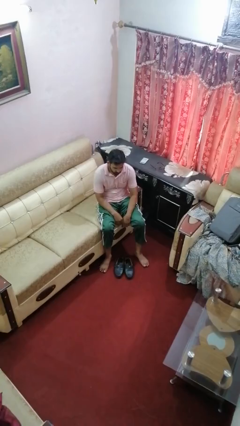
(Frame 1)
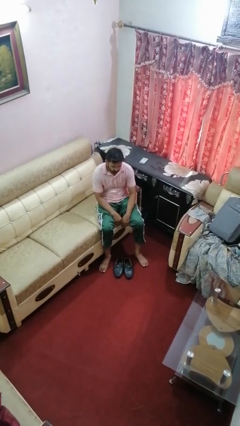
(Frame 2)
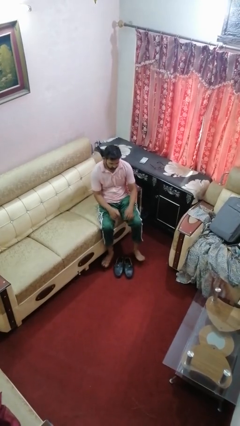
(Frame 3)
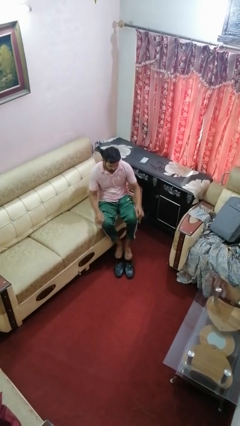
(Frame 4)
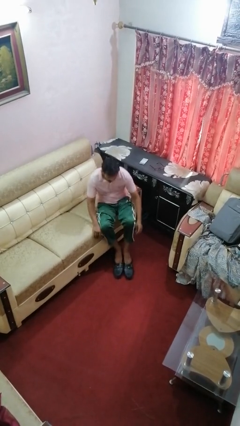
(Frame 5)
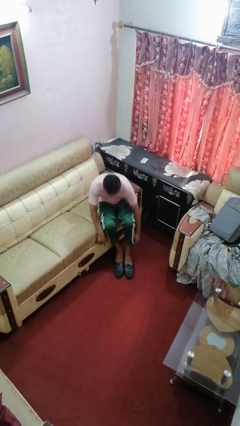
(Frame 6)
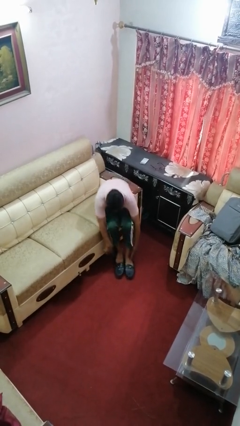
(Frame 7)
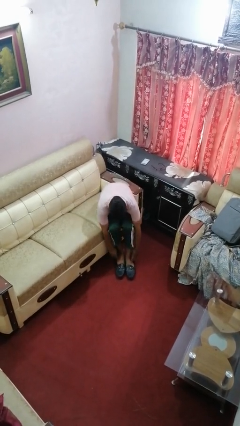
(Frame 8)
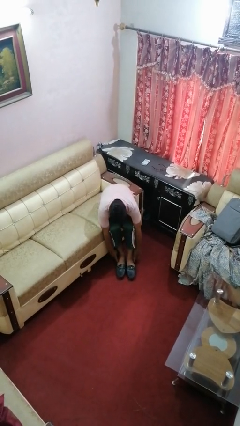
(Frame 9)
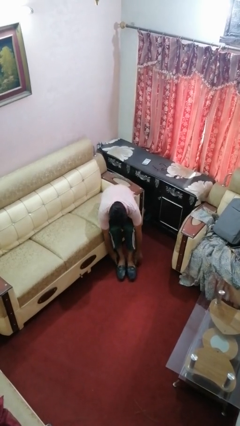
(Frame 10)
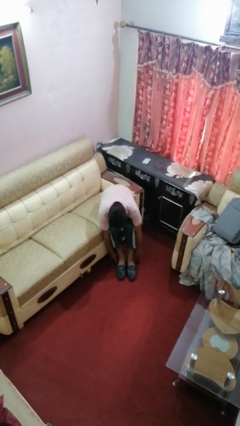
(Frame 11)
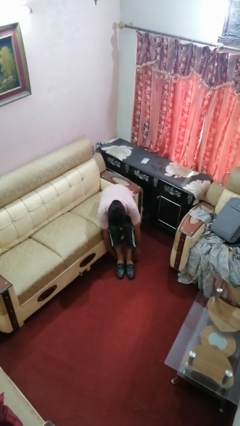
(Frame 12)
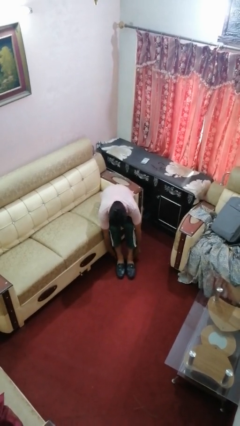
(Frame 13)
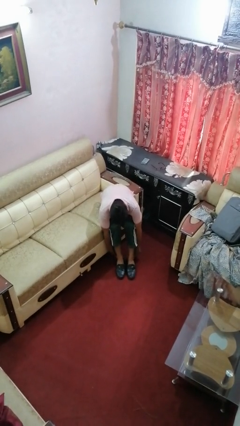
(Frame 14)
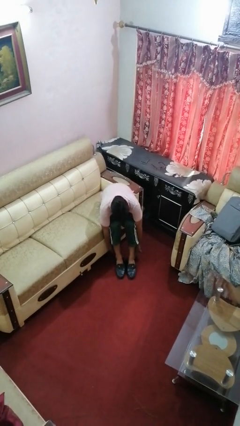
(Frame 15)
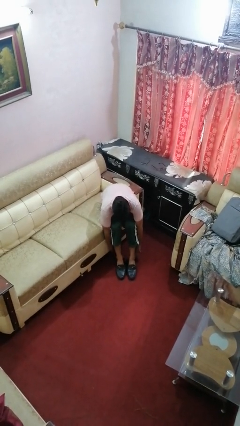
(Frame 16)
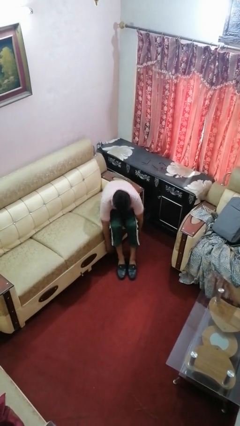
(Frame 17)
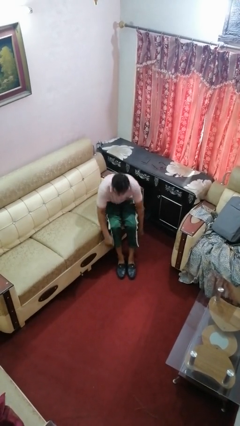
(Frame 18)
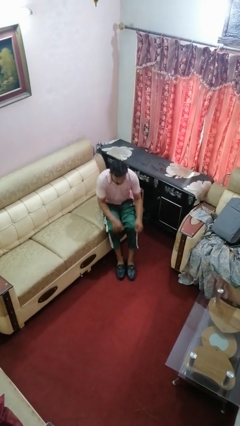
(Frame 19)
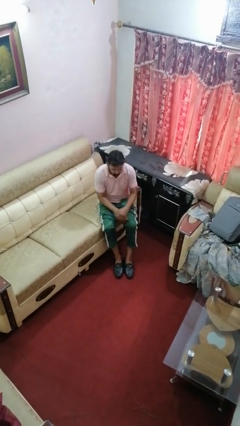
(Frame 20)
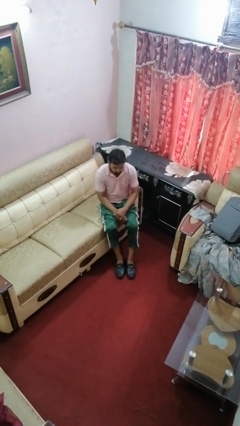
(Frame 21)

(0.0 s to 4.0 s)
person puts on shoes

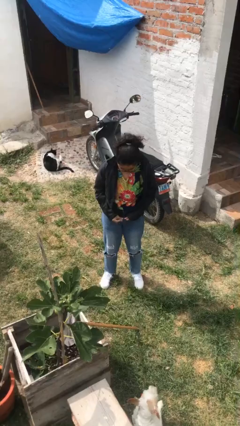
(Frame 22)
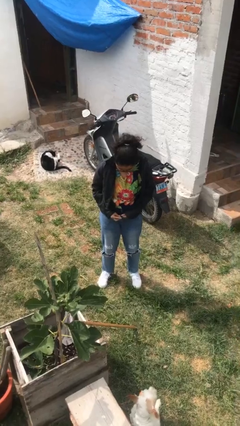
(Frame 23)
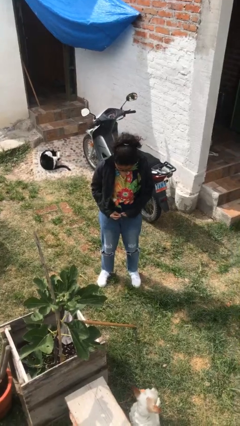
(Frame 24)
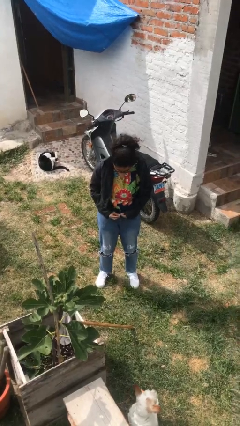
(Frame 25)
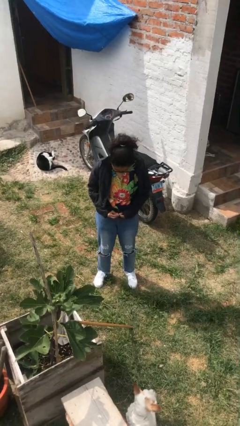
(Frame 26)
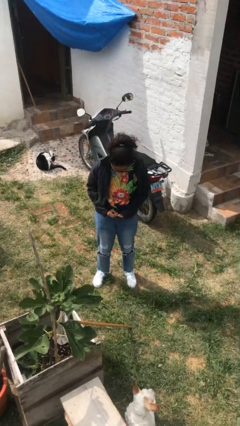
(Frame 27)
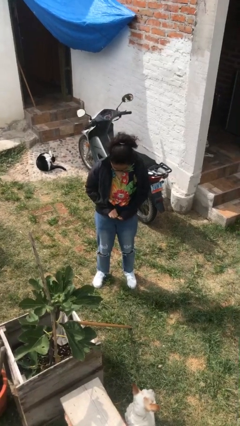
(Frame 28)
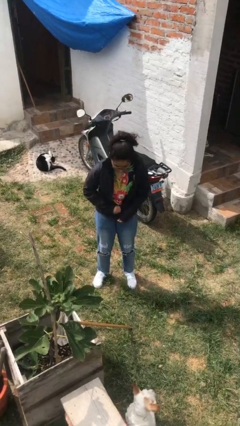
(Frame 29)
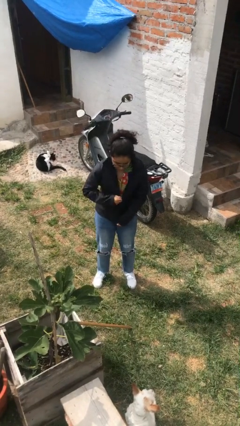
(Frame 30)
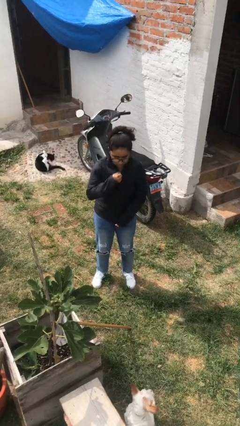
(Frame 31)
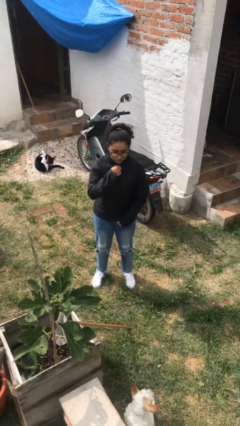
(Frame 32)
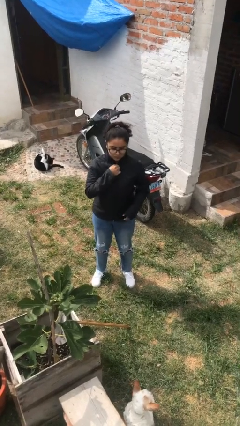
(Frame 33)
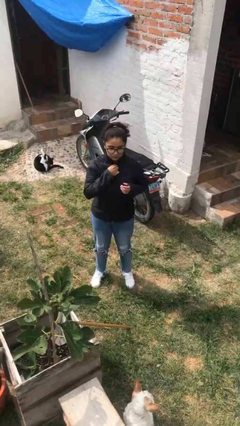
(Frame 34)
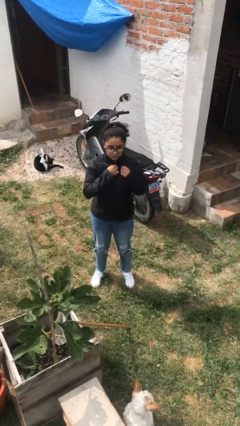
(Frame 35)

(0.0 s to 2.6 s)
person zips up jacket

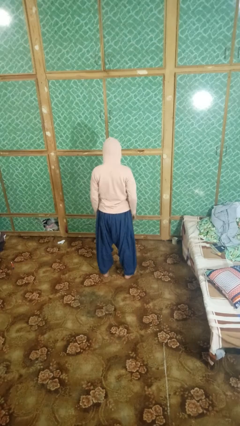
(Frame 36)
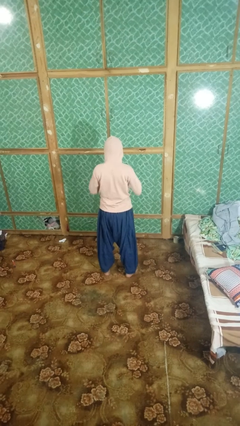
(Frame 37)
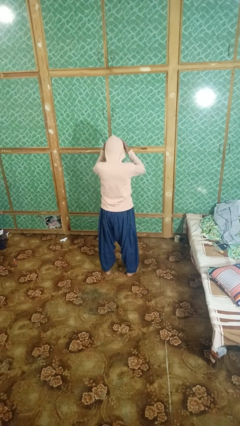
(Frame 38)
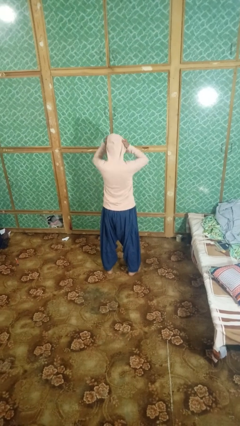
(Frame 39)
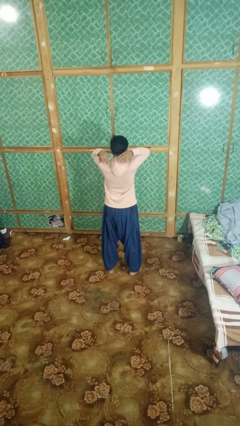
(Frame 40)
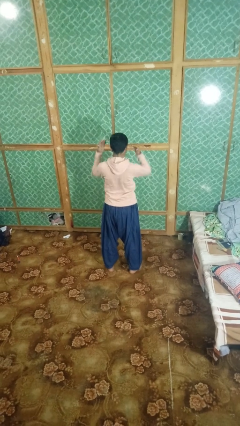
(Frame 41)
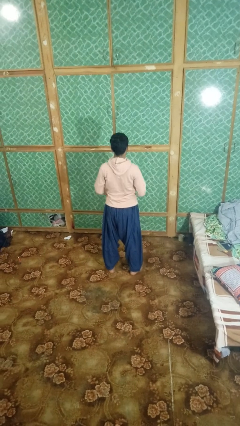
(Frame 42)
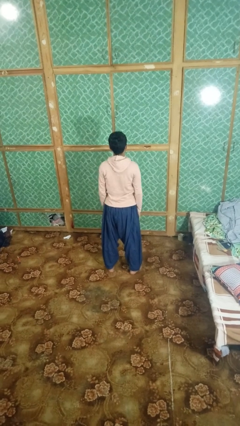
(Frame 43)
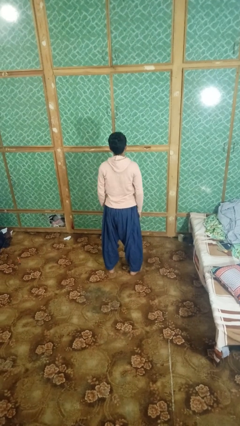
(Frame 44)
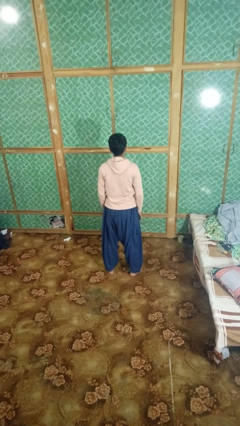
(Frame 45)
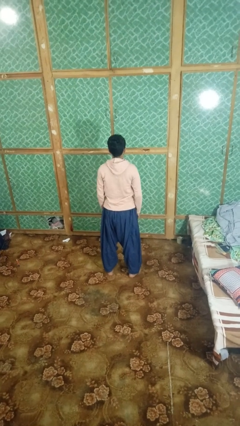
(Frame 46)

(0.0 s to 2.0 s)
person takes off hoodie

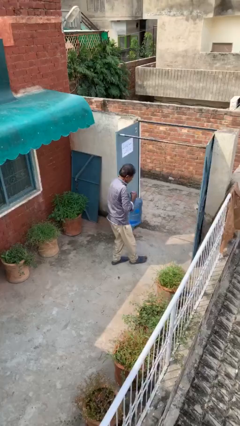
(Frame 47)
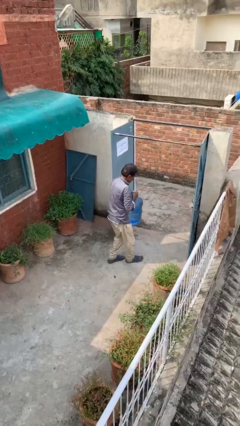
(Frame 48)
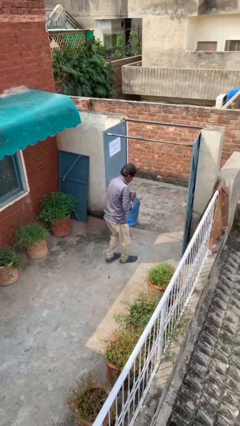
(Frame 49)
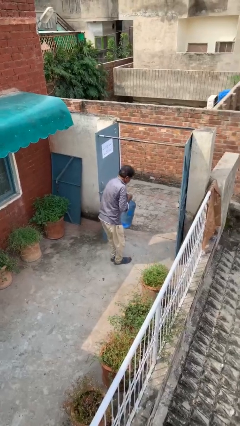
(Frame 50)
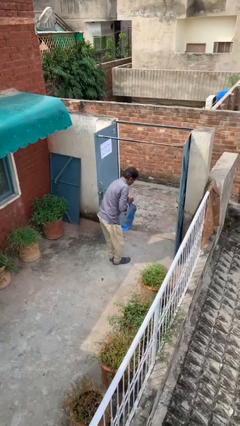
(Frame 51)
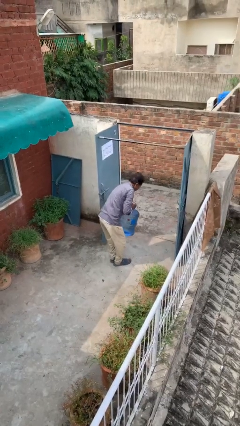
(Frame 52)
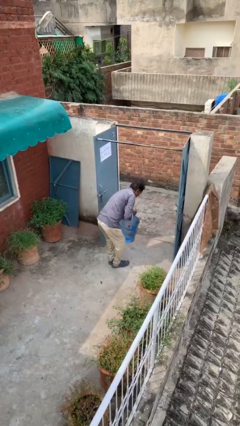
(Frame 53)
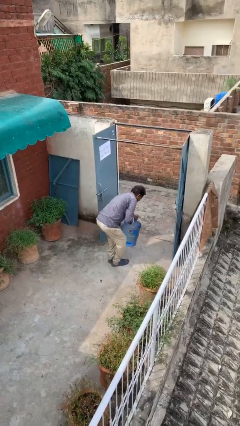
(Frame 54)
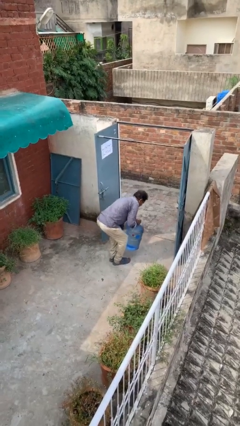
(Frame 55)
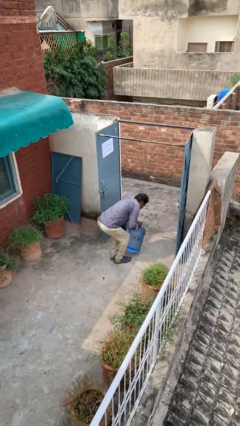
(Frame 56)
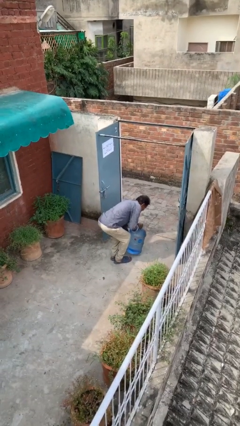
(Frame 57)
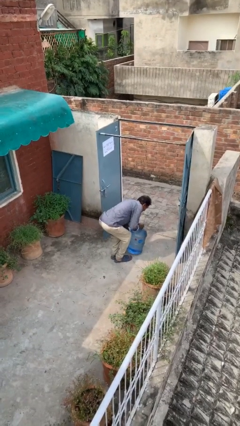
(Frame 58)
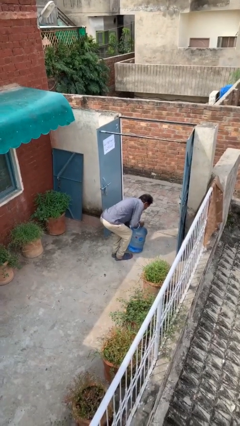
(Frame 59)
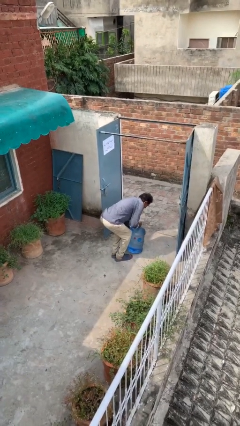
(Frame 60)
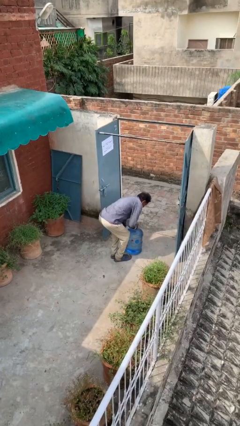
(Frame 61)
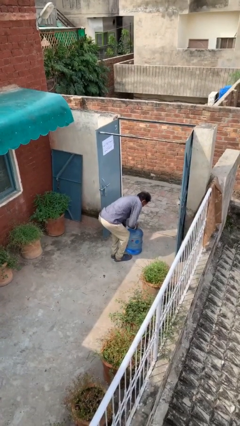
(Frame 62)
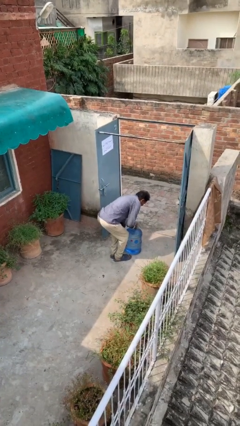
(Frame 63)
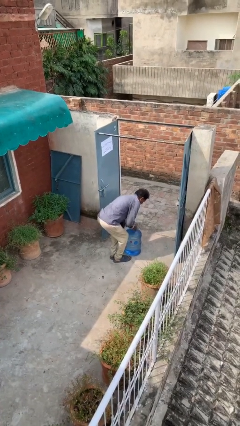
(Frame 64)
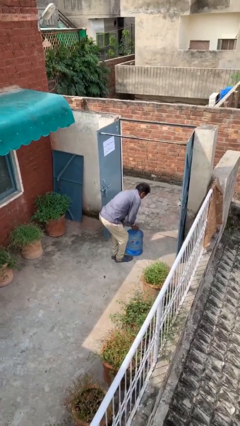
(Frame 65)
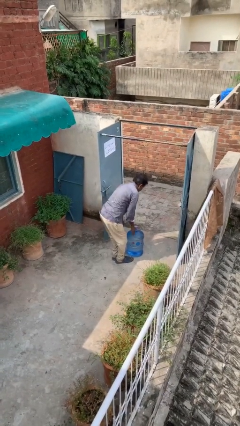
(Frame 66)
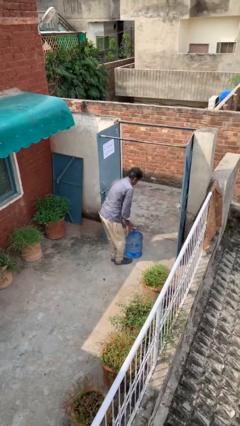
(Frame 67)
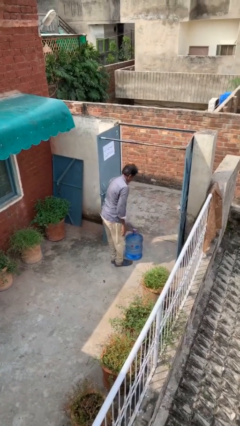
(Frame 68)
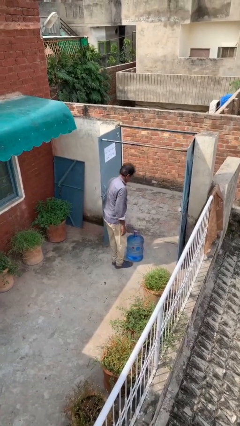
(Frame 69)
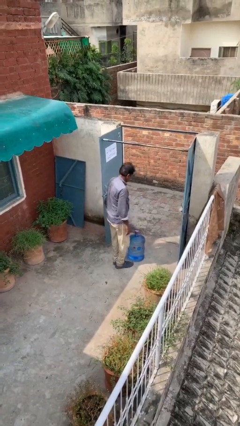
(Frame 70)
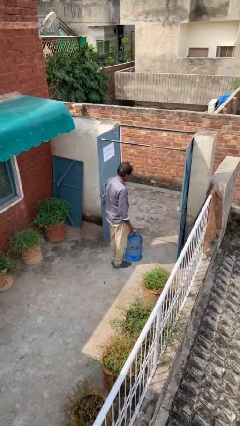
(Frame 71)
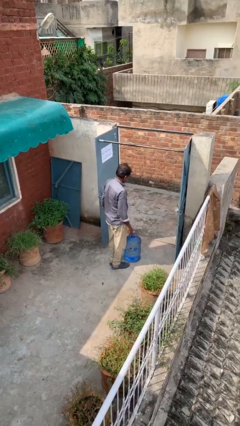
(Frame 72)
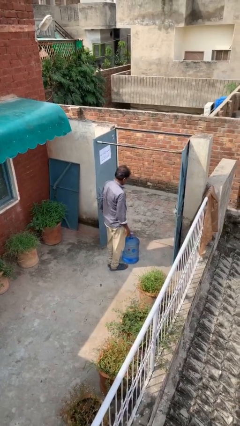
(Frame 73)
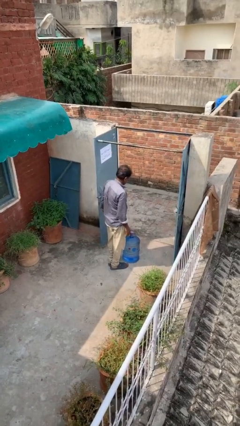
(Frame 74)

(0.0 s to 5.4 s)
person puts down object on floor

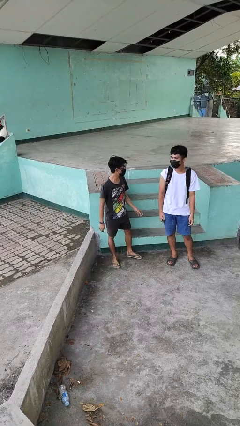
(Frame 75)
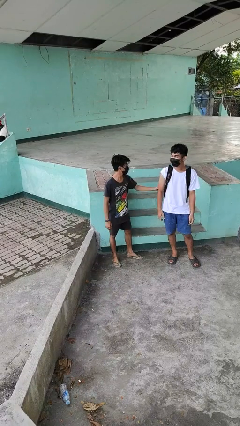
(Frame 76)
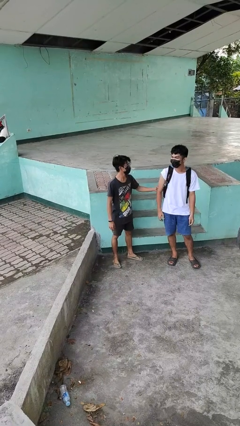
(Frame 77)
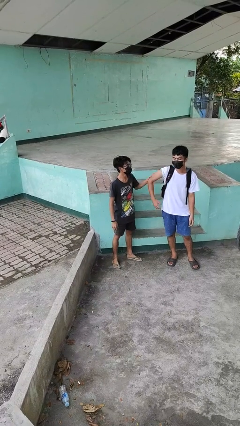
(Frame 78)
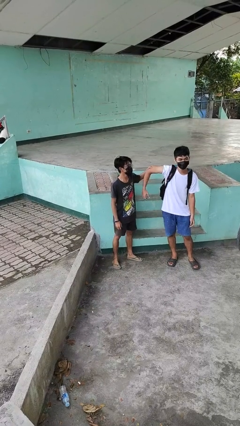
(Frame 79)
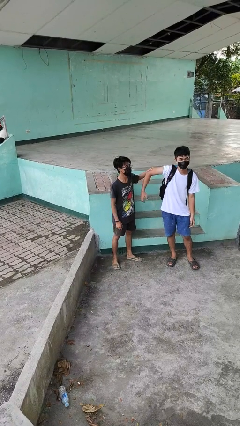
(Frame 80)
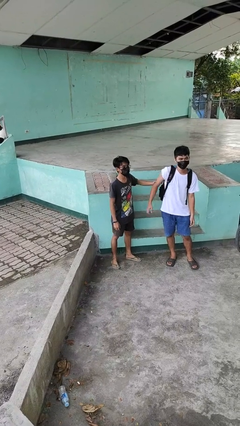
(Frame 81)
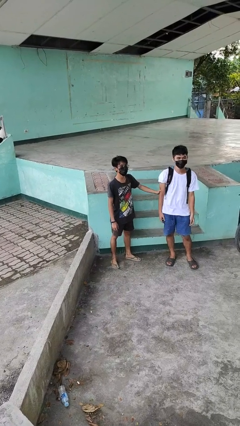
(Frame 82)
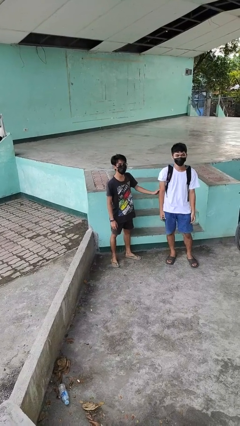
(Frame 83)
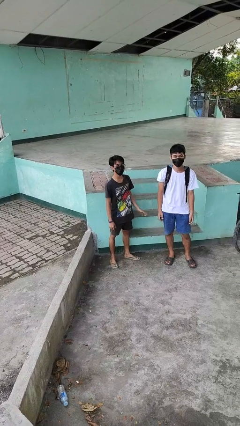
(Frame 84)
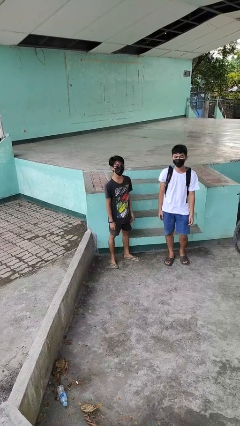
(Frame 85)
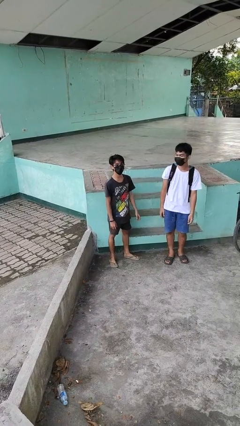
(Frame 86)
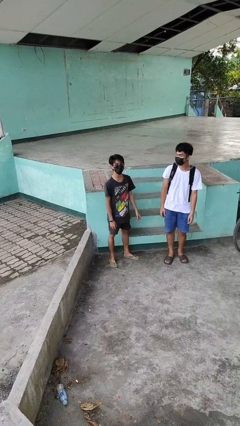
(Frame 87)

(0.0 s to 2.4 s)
person grabs person by bicep

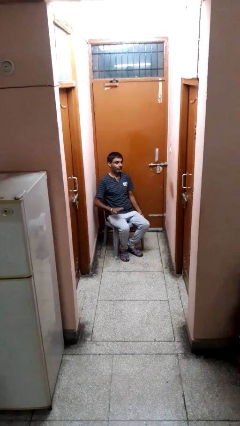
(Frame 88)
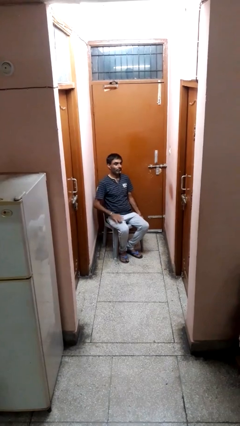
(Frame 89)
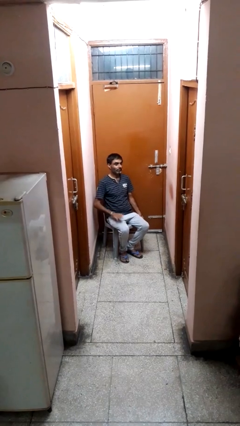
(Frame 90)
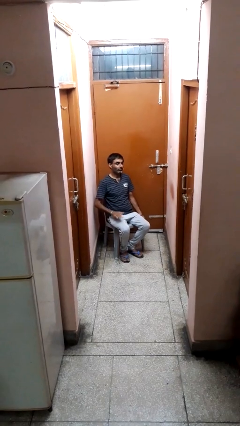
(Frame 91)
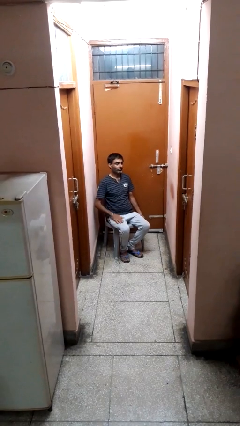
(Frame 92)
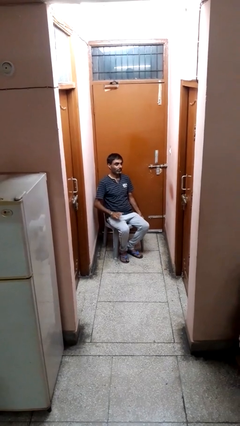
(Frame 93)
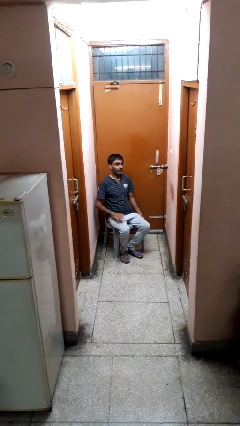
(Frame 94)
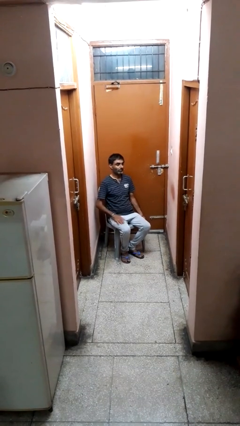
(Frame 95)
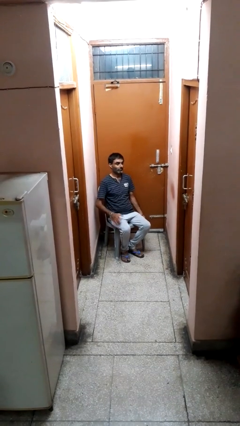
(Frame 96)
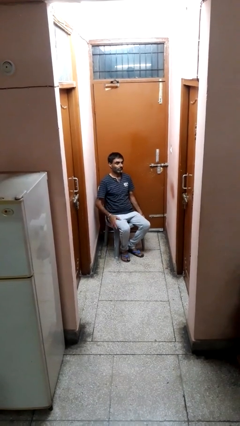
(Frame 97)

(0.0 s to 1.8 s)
person slaps hands on thighs
